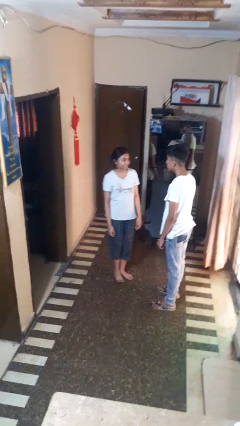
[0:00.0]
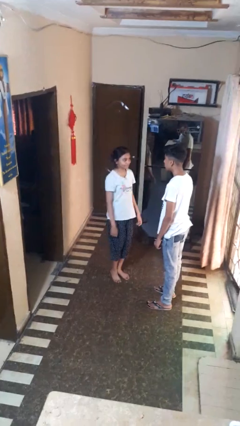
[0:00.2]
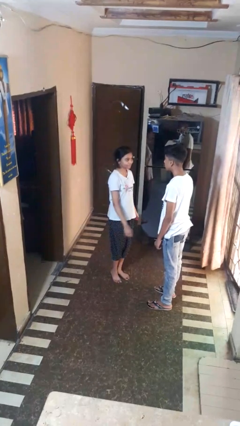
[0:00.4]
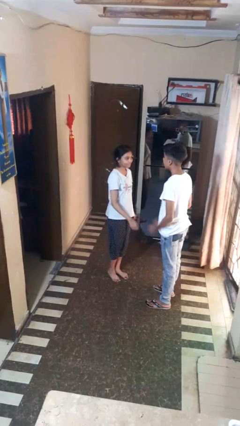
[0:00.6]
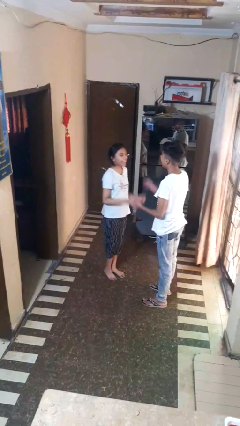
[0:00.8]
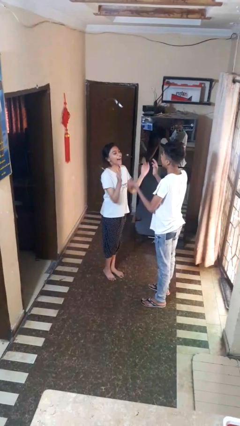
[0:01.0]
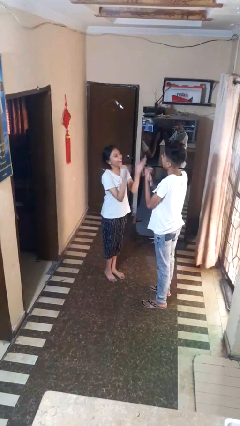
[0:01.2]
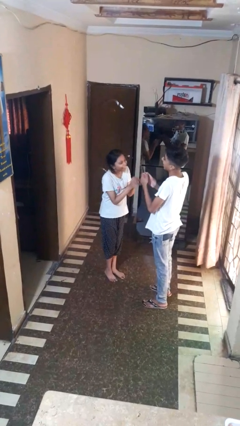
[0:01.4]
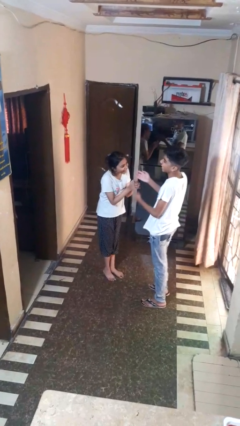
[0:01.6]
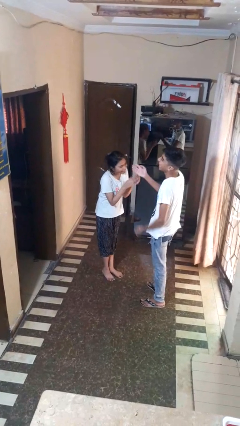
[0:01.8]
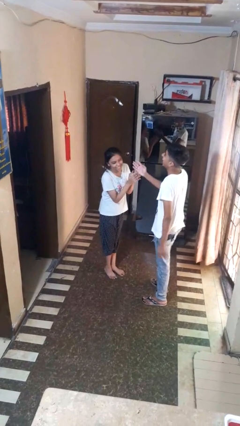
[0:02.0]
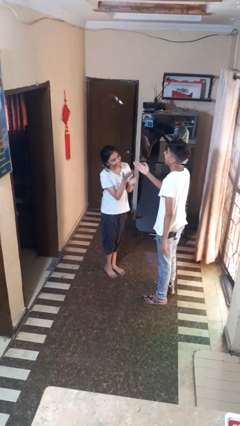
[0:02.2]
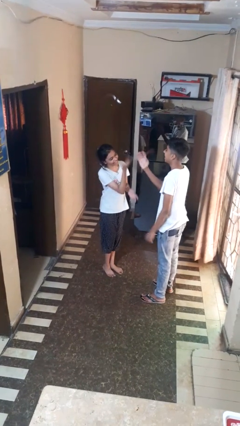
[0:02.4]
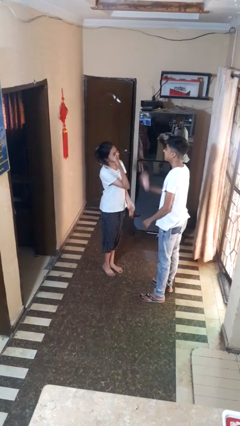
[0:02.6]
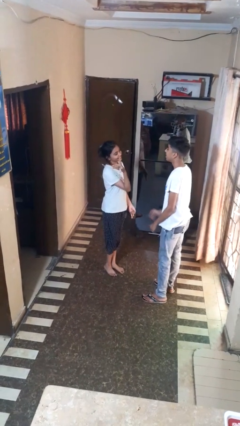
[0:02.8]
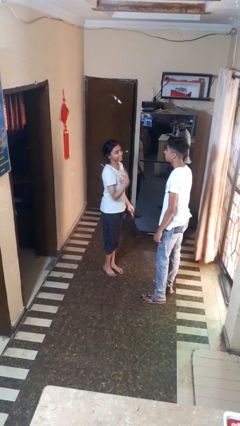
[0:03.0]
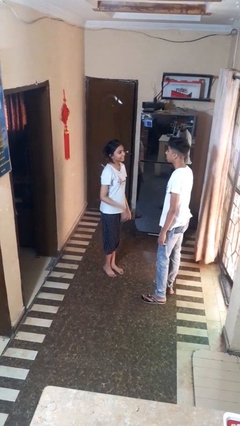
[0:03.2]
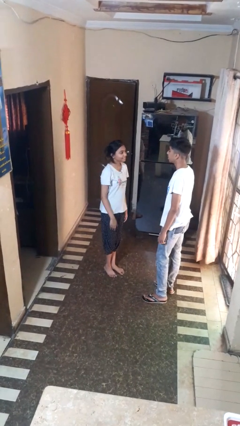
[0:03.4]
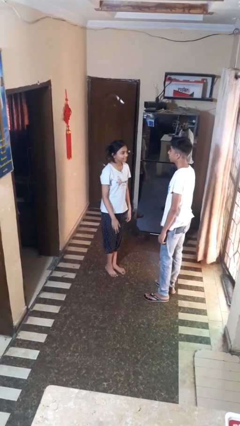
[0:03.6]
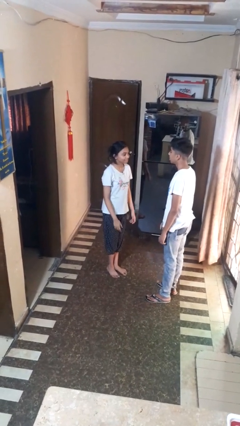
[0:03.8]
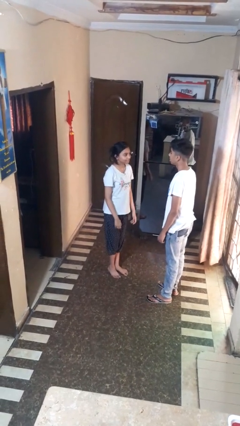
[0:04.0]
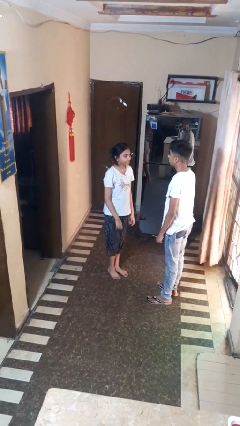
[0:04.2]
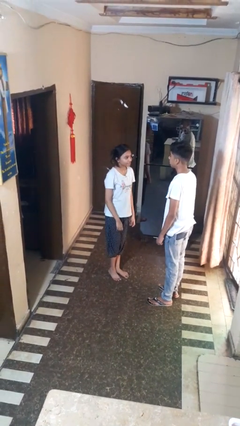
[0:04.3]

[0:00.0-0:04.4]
person laughs with person

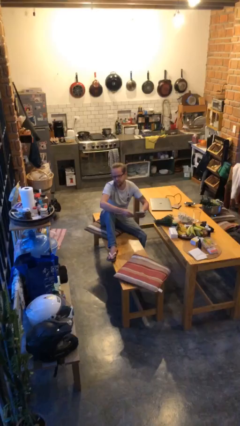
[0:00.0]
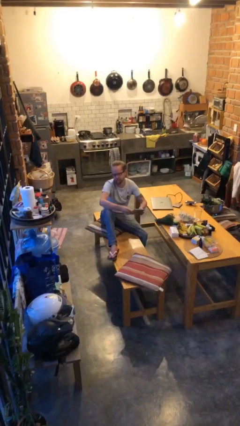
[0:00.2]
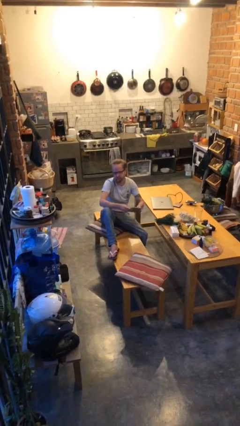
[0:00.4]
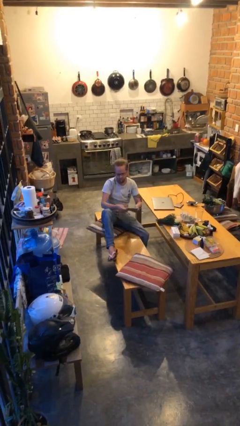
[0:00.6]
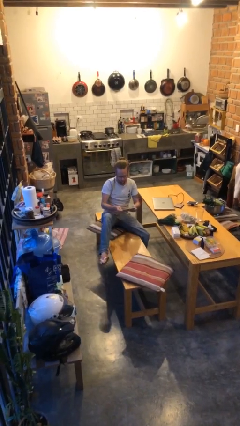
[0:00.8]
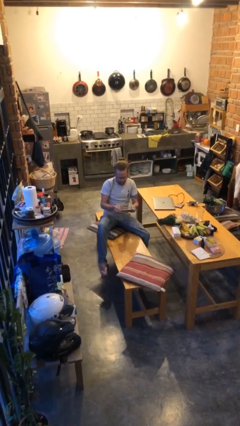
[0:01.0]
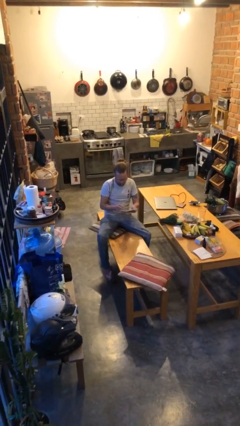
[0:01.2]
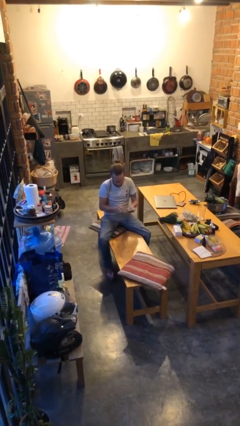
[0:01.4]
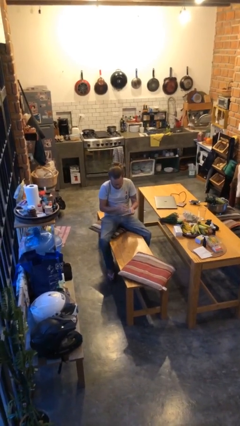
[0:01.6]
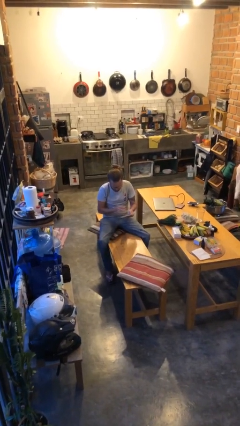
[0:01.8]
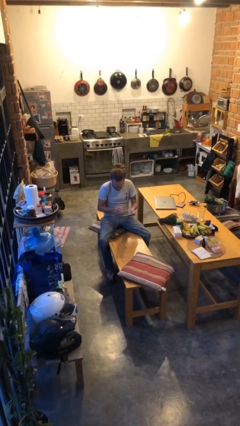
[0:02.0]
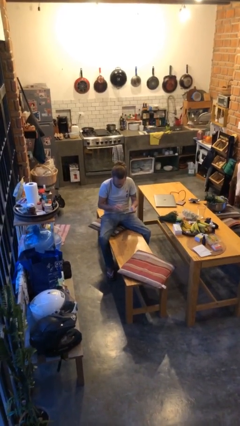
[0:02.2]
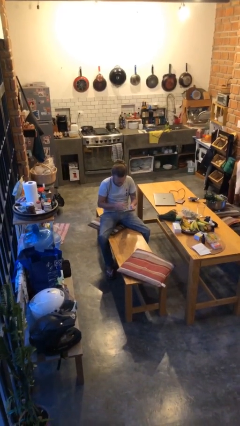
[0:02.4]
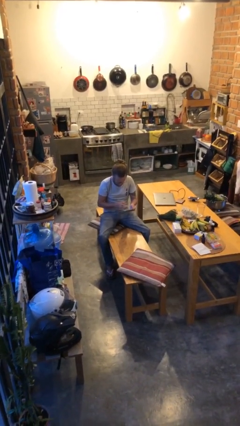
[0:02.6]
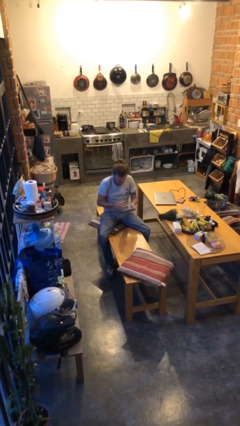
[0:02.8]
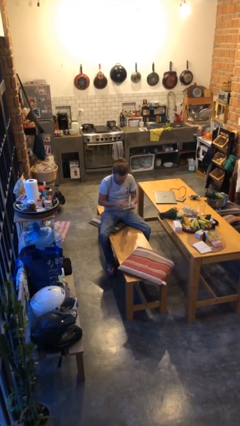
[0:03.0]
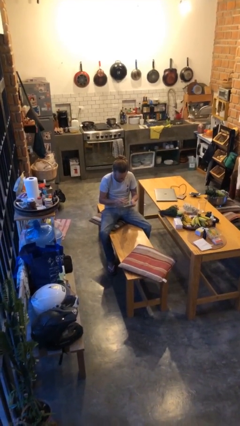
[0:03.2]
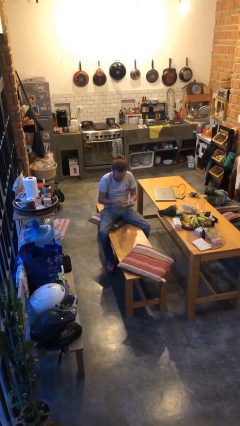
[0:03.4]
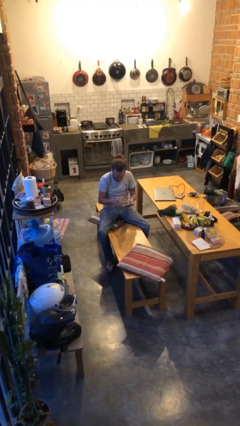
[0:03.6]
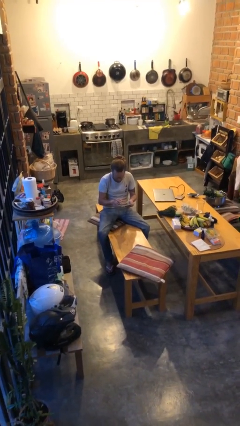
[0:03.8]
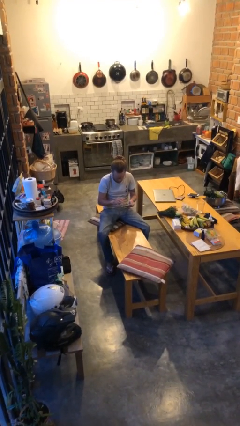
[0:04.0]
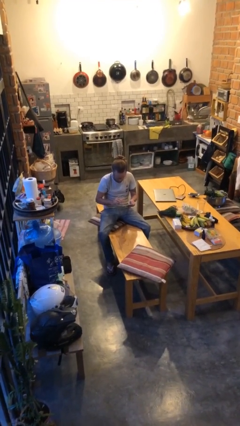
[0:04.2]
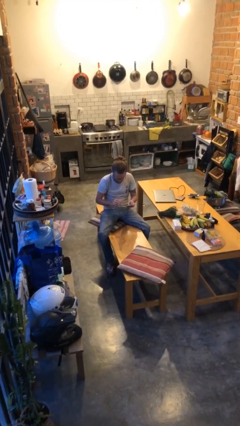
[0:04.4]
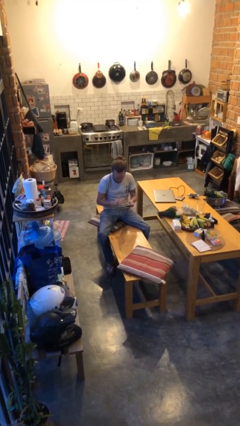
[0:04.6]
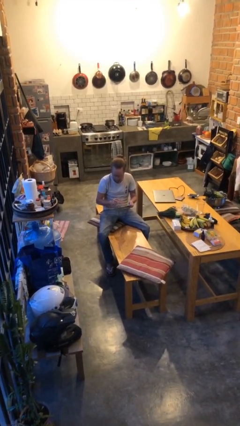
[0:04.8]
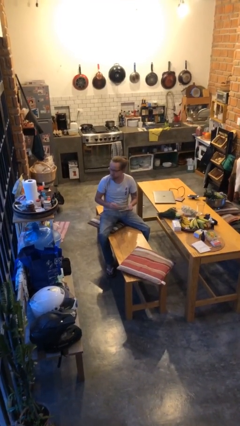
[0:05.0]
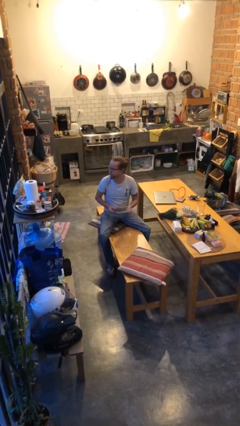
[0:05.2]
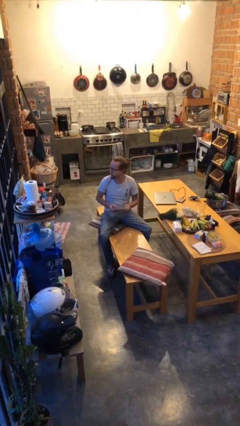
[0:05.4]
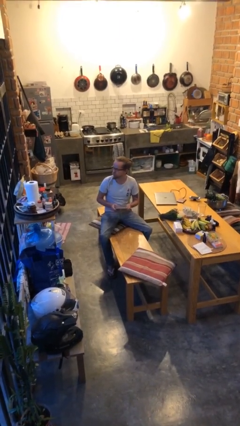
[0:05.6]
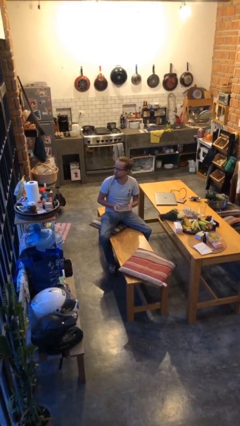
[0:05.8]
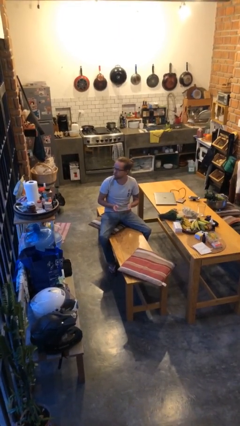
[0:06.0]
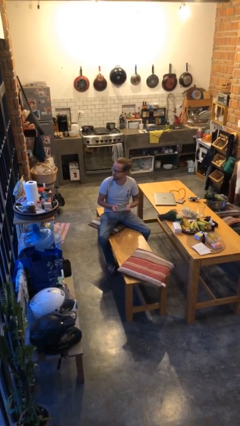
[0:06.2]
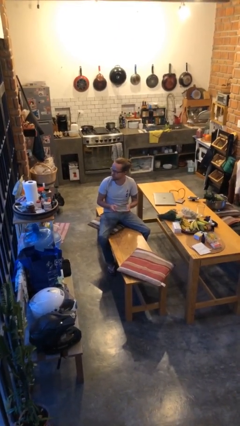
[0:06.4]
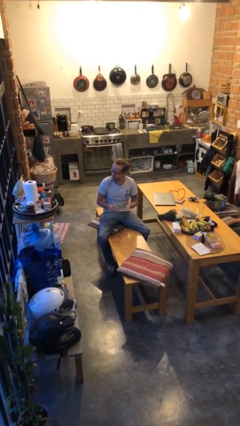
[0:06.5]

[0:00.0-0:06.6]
person interacts with tablet

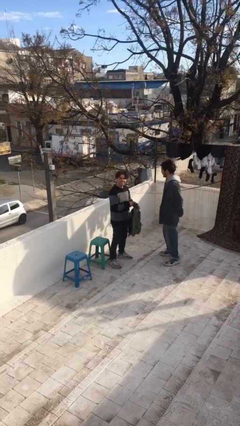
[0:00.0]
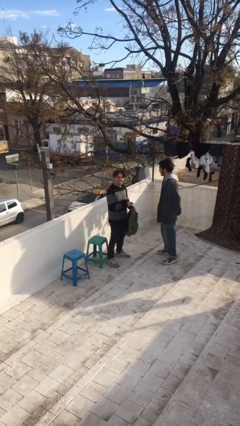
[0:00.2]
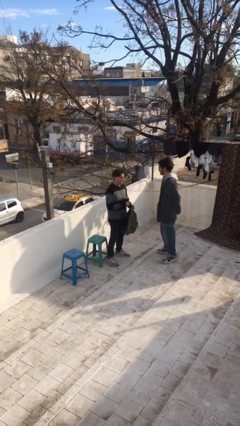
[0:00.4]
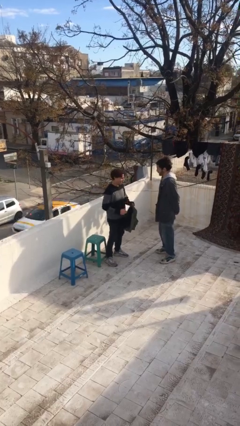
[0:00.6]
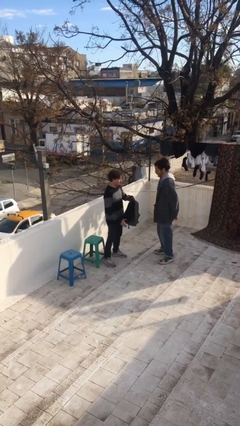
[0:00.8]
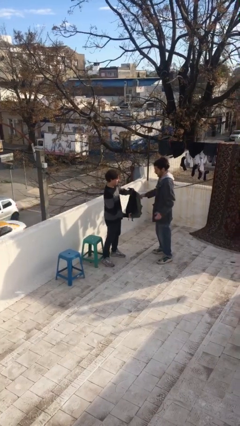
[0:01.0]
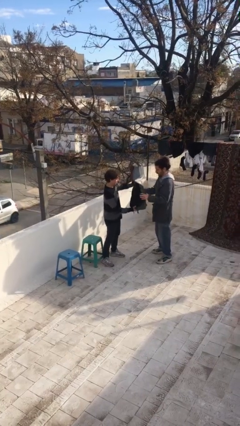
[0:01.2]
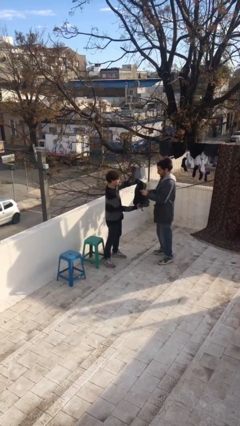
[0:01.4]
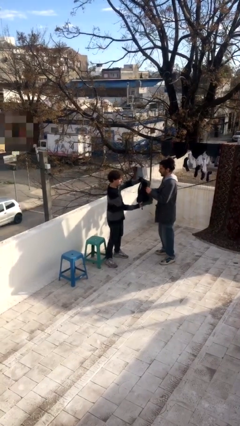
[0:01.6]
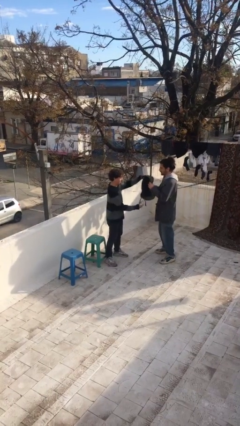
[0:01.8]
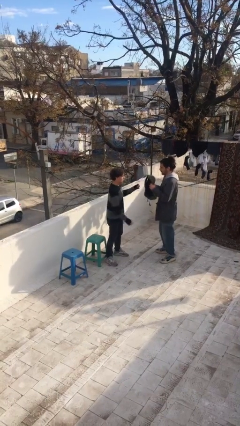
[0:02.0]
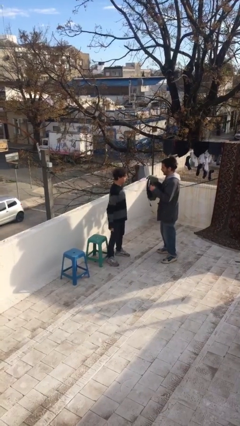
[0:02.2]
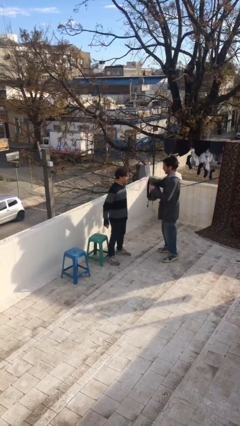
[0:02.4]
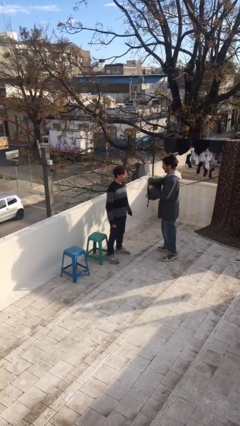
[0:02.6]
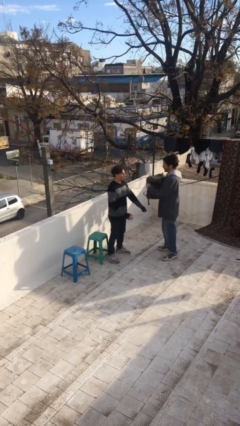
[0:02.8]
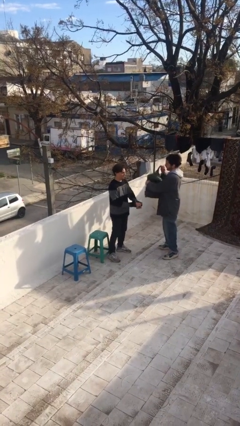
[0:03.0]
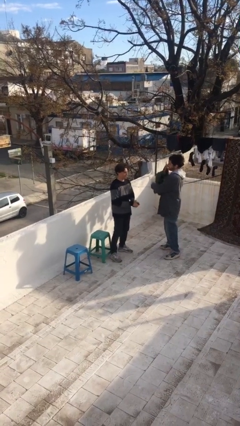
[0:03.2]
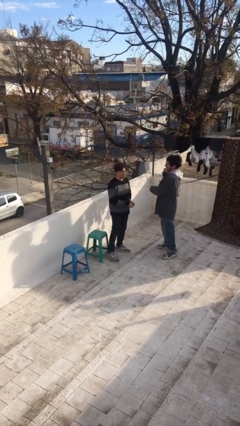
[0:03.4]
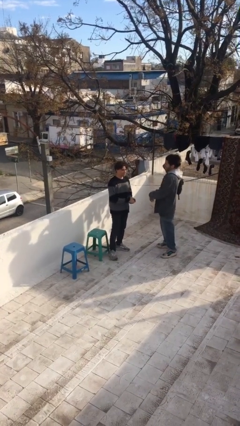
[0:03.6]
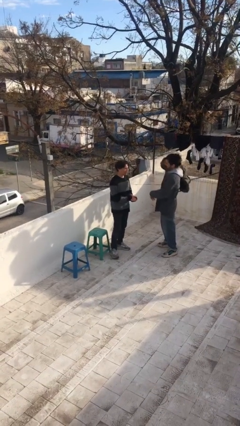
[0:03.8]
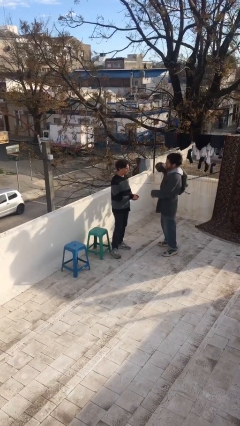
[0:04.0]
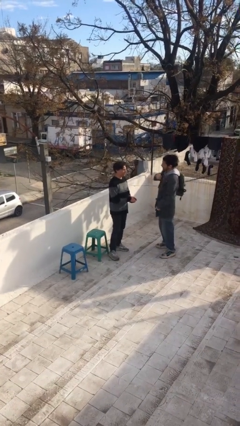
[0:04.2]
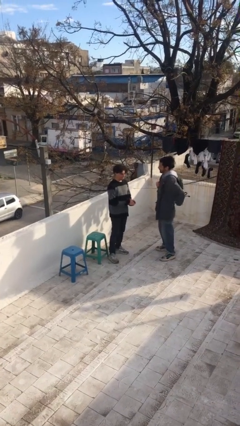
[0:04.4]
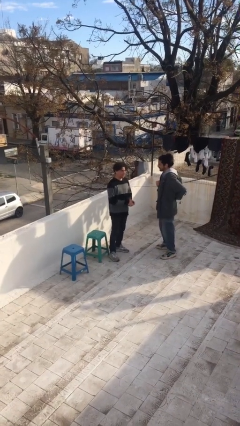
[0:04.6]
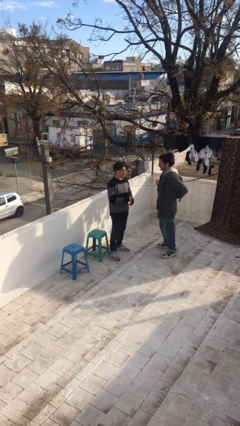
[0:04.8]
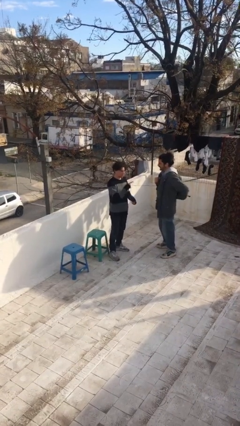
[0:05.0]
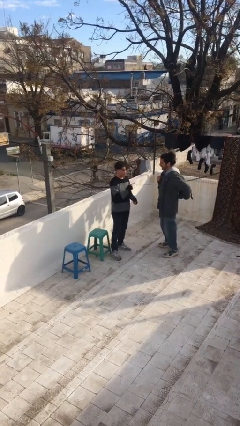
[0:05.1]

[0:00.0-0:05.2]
person transfers object to person

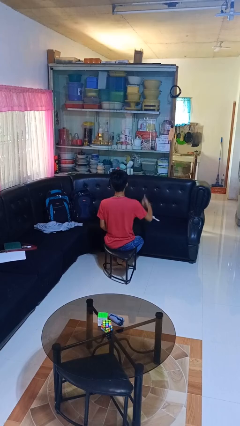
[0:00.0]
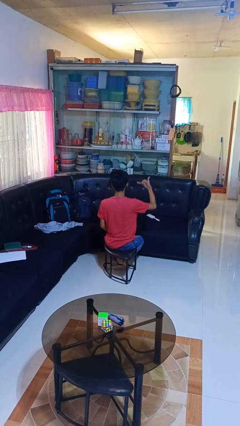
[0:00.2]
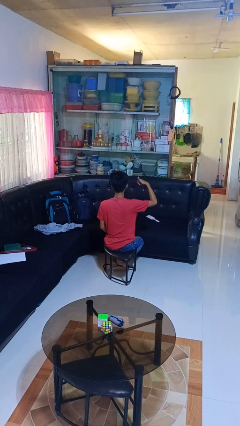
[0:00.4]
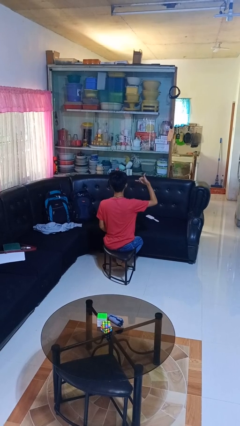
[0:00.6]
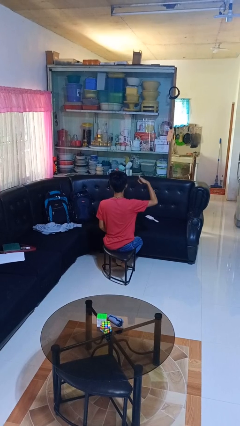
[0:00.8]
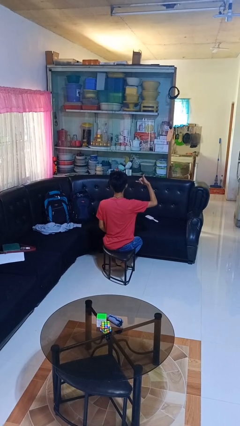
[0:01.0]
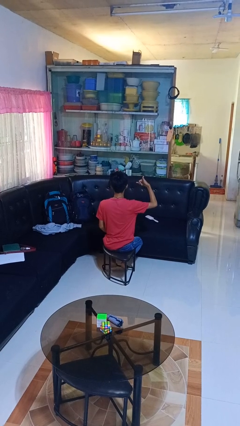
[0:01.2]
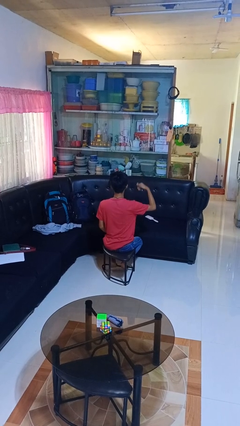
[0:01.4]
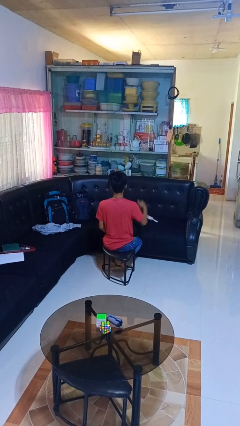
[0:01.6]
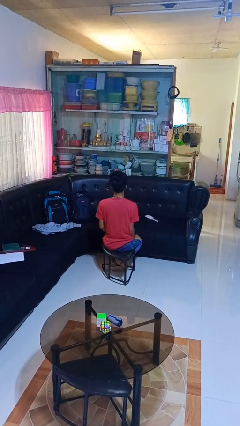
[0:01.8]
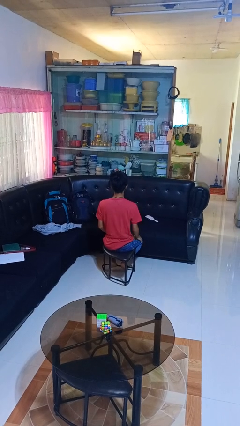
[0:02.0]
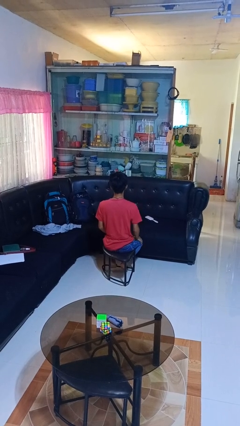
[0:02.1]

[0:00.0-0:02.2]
person gestures hang loose
